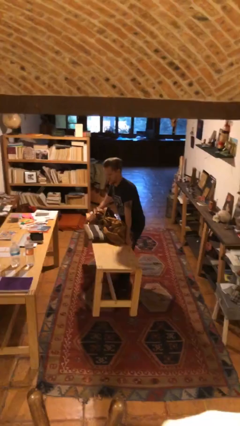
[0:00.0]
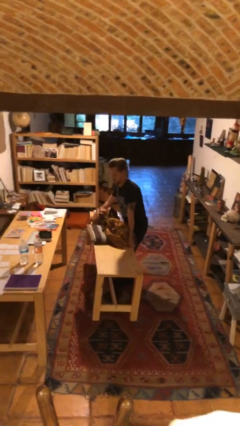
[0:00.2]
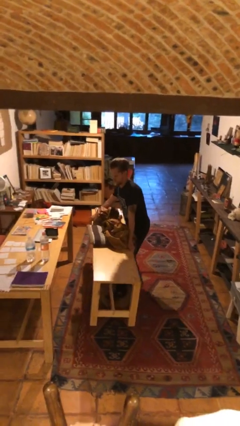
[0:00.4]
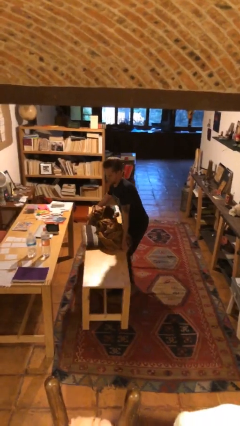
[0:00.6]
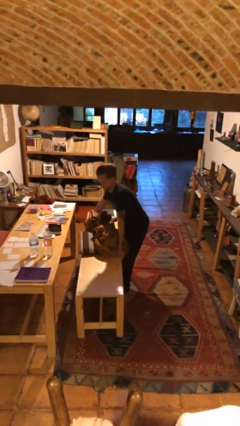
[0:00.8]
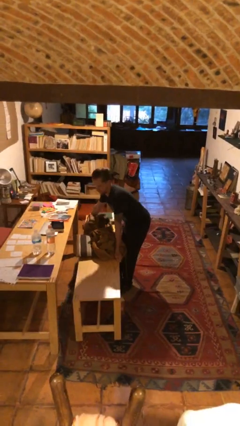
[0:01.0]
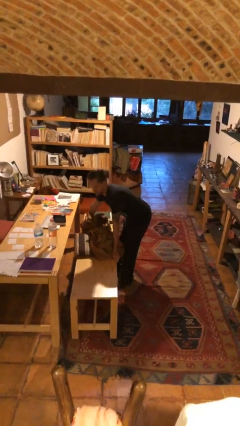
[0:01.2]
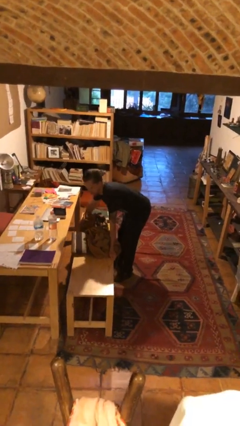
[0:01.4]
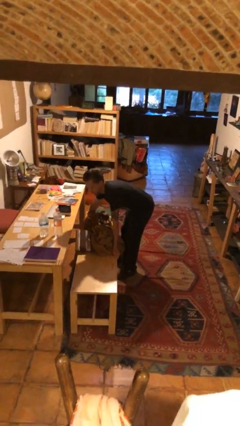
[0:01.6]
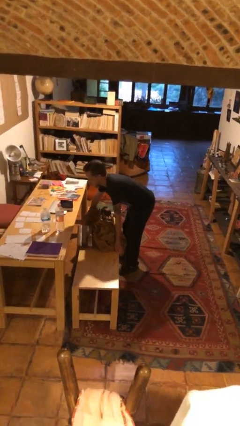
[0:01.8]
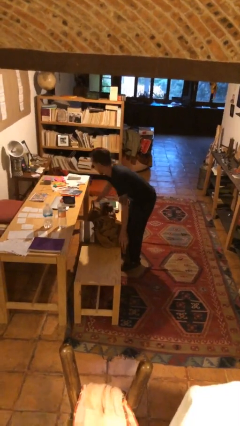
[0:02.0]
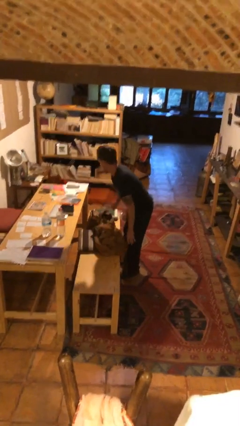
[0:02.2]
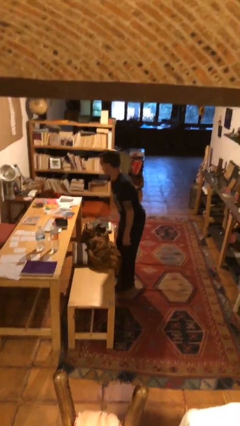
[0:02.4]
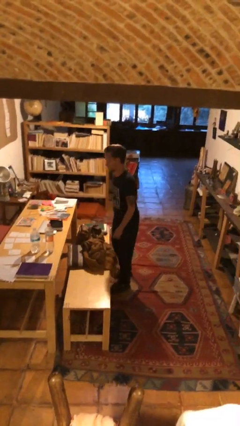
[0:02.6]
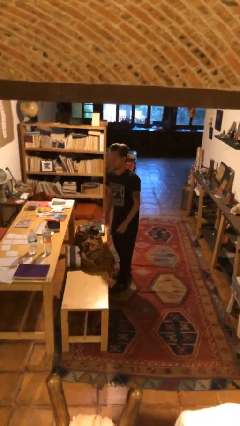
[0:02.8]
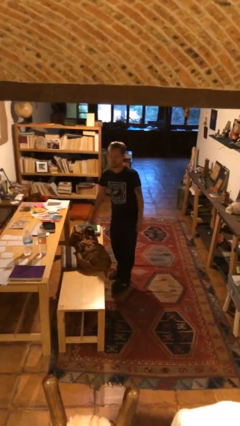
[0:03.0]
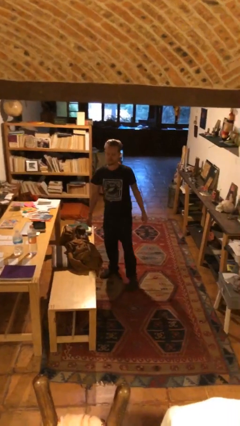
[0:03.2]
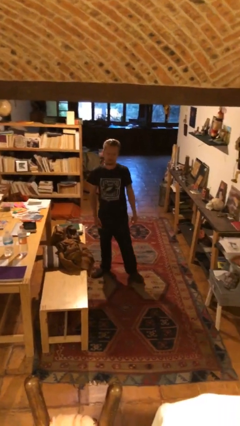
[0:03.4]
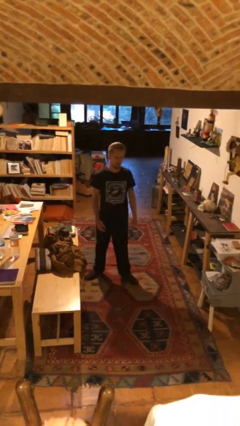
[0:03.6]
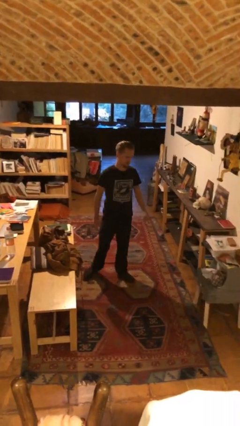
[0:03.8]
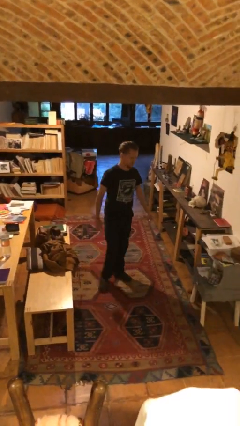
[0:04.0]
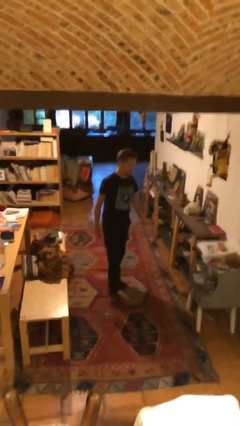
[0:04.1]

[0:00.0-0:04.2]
person puts down object on floor

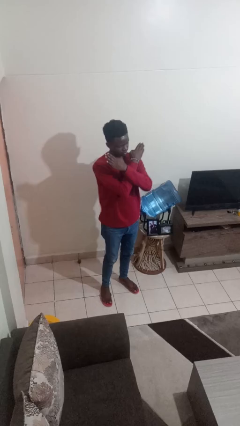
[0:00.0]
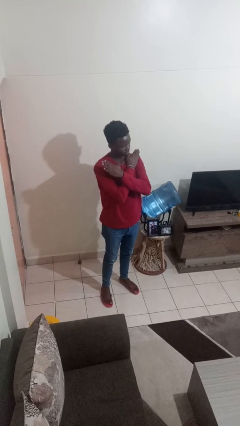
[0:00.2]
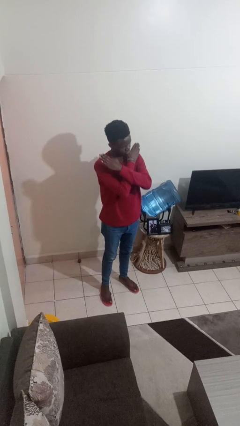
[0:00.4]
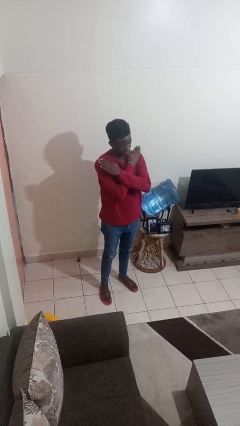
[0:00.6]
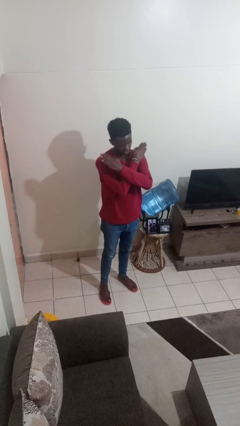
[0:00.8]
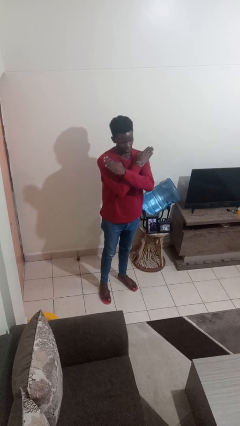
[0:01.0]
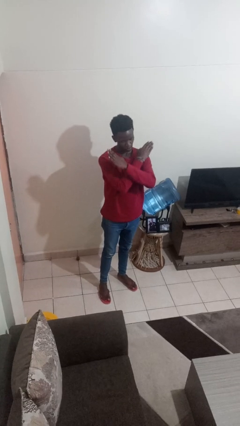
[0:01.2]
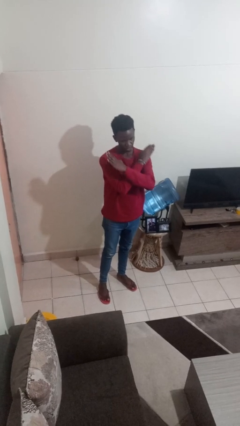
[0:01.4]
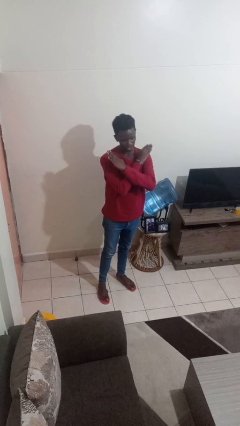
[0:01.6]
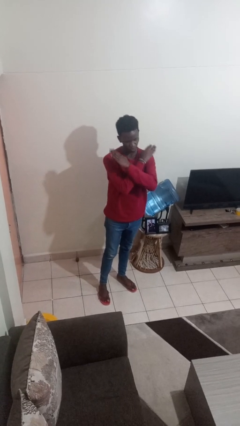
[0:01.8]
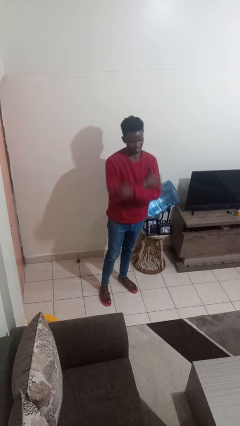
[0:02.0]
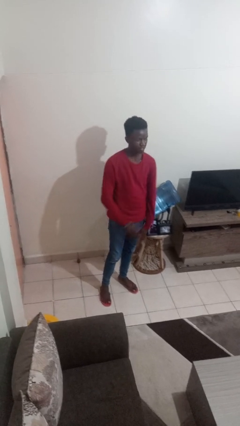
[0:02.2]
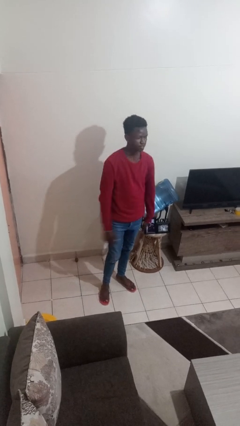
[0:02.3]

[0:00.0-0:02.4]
person gestures arms x

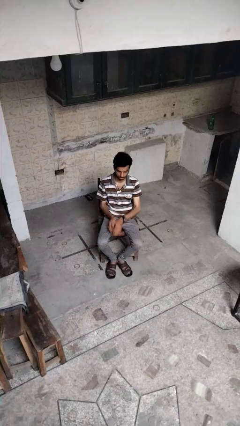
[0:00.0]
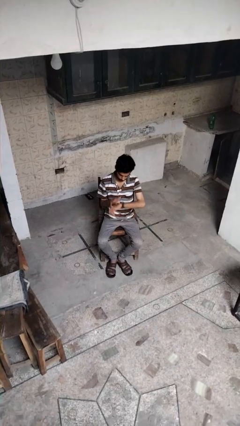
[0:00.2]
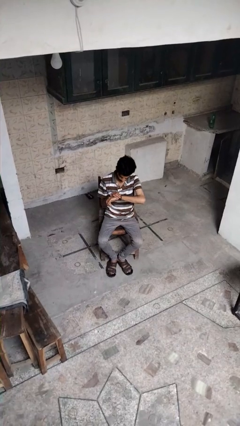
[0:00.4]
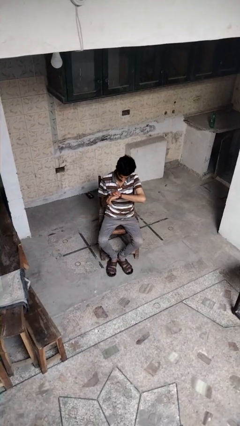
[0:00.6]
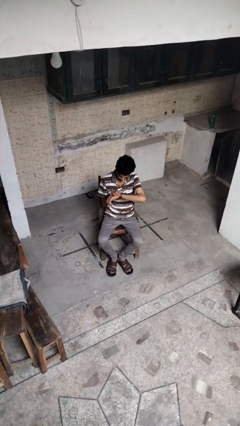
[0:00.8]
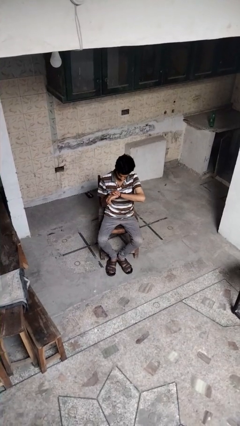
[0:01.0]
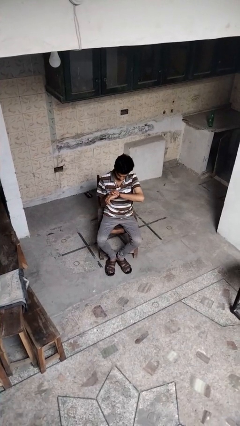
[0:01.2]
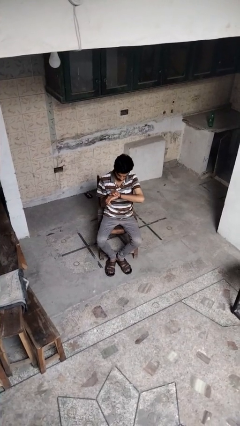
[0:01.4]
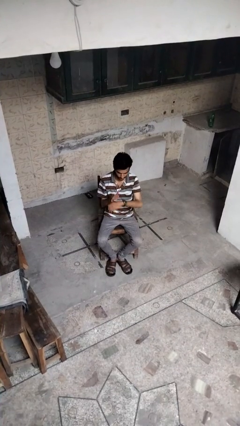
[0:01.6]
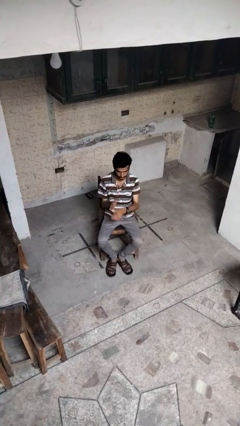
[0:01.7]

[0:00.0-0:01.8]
person looks at wristwatch

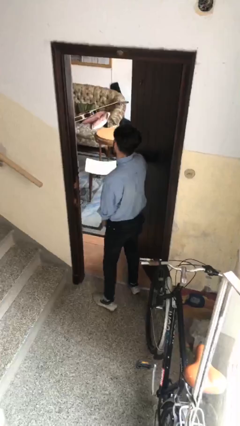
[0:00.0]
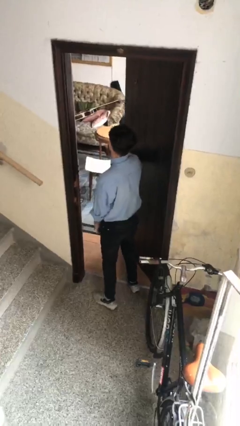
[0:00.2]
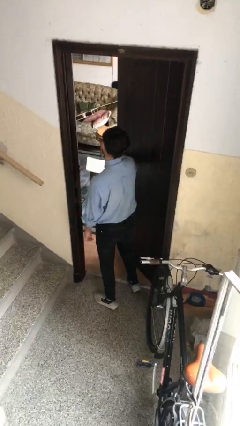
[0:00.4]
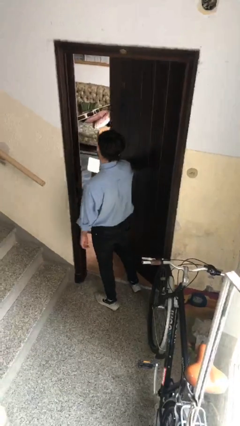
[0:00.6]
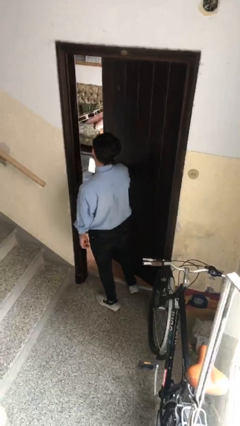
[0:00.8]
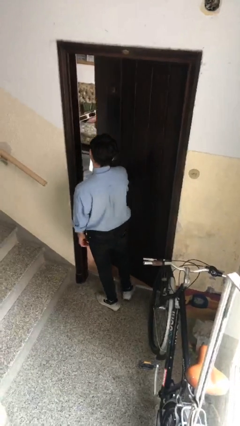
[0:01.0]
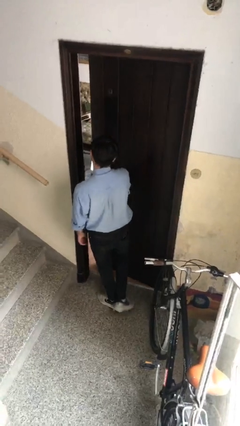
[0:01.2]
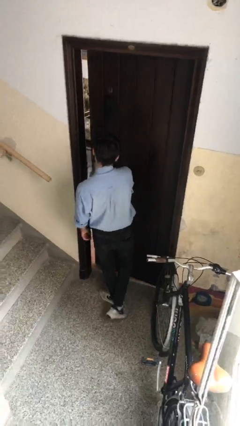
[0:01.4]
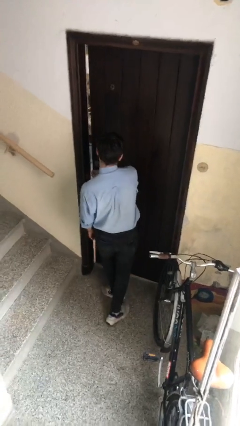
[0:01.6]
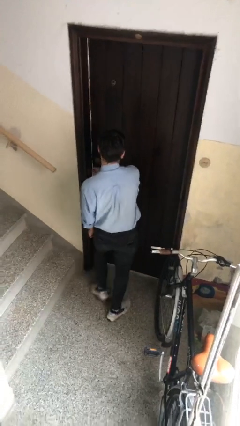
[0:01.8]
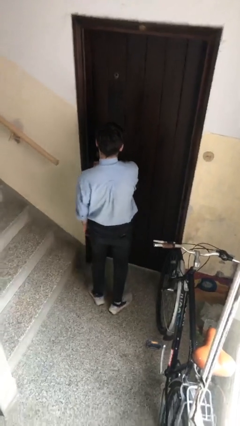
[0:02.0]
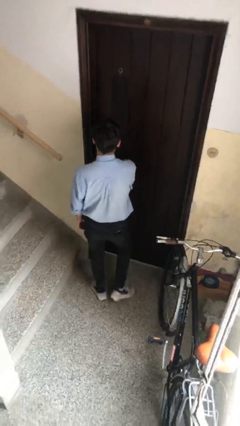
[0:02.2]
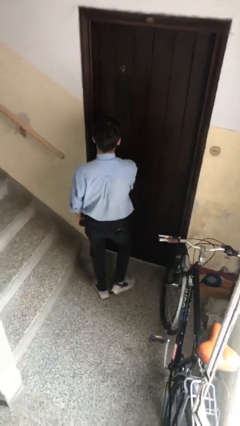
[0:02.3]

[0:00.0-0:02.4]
person closes facility door

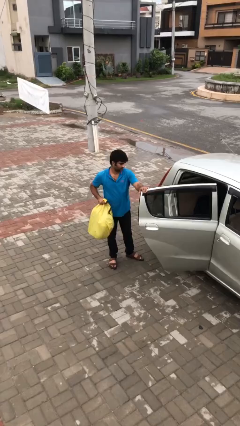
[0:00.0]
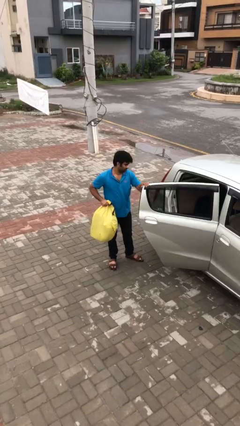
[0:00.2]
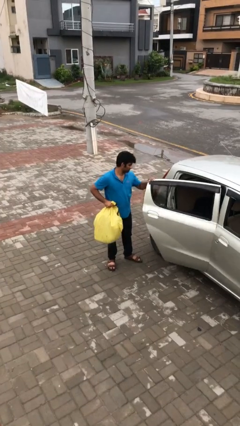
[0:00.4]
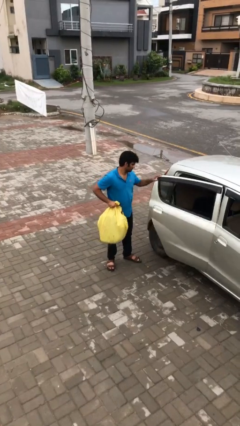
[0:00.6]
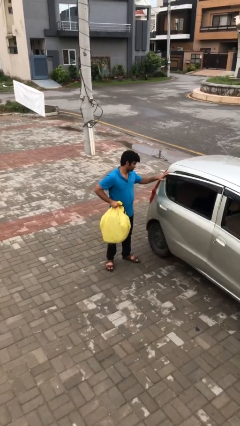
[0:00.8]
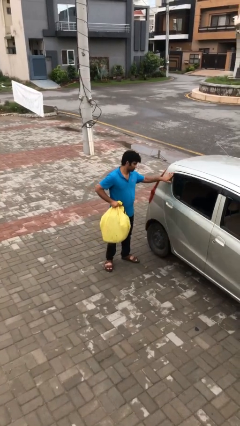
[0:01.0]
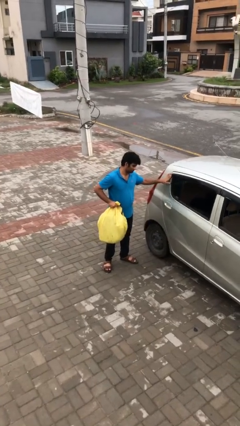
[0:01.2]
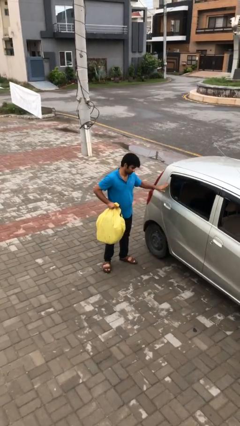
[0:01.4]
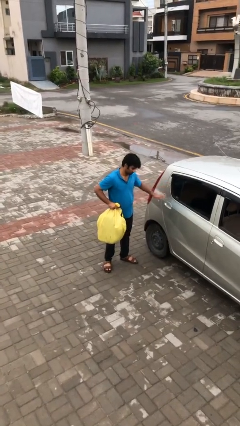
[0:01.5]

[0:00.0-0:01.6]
person closes car door

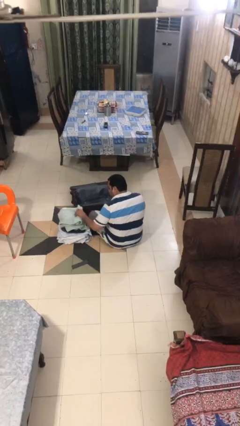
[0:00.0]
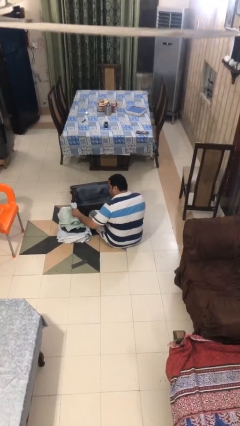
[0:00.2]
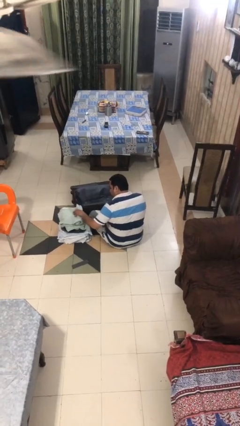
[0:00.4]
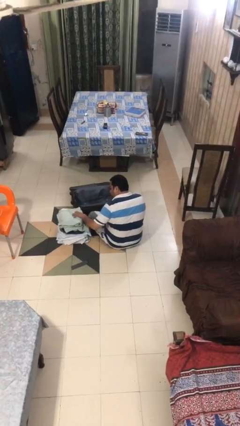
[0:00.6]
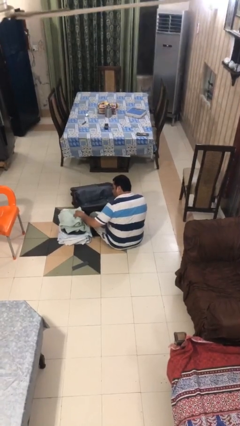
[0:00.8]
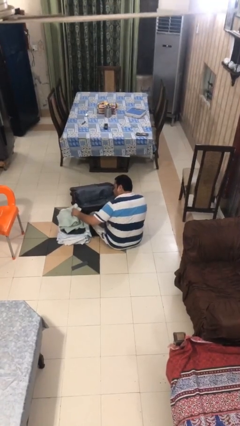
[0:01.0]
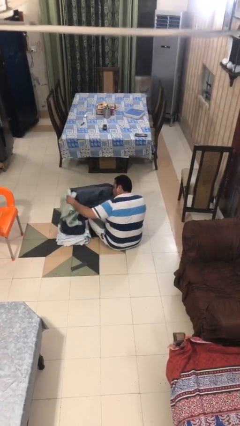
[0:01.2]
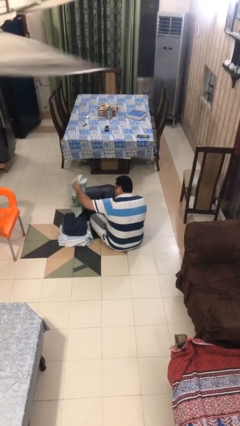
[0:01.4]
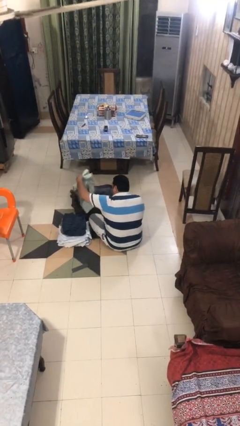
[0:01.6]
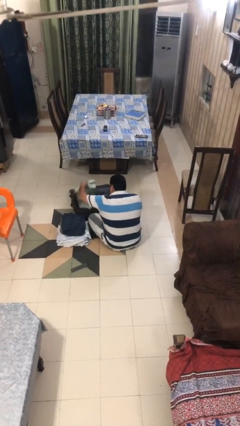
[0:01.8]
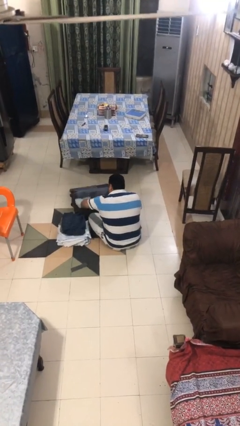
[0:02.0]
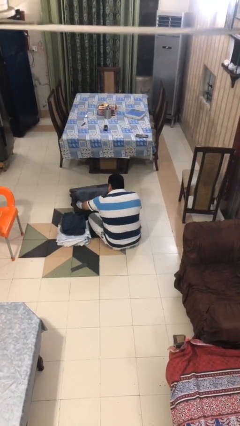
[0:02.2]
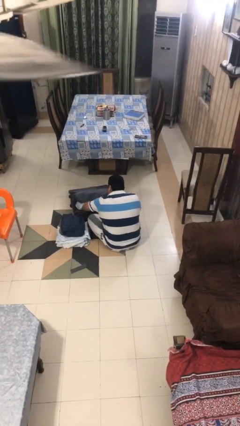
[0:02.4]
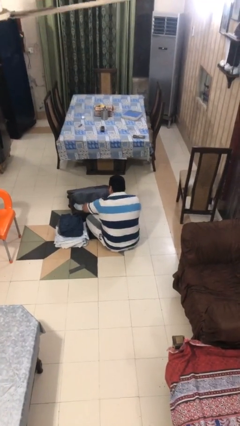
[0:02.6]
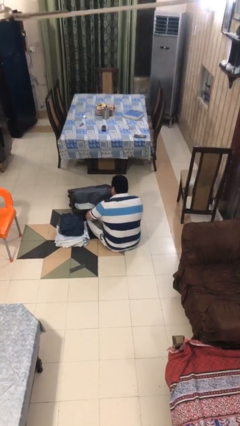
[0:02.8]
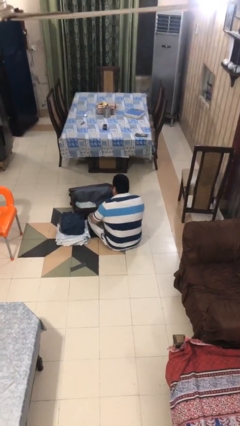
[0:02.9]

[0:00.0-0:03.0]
person loads clothes into suitcase

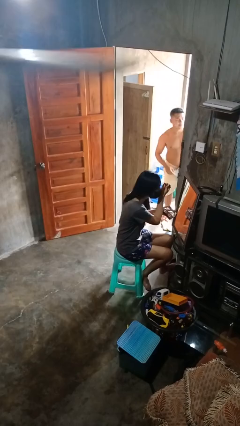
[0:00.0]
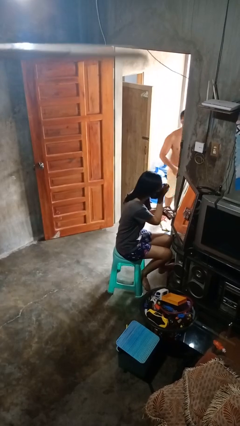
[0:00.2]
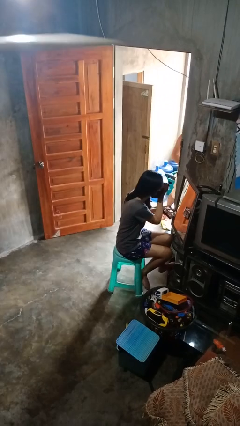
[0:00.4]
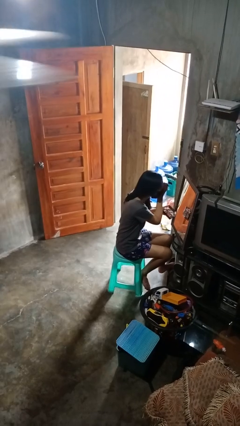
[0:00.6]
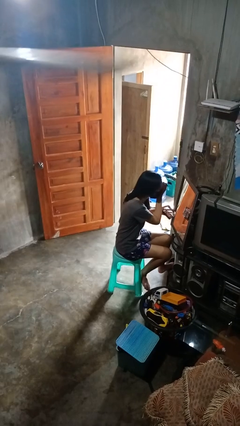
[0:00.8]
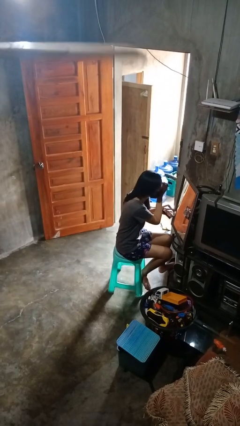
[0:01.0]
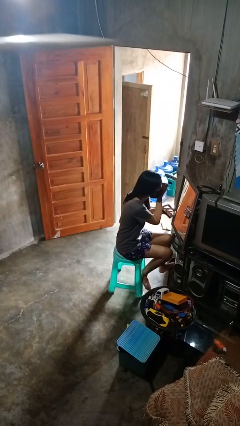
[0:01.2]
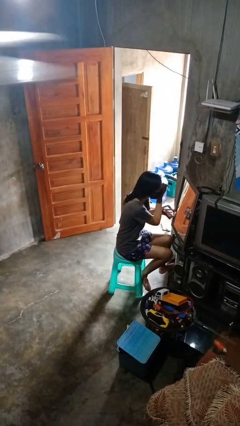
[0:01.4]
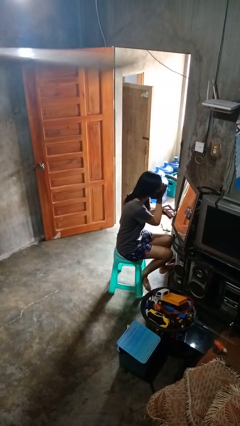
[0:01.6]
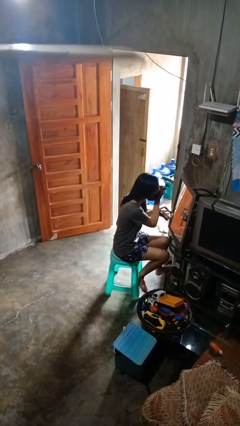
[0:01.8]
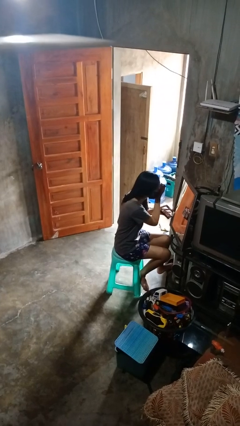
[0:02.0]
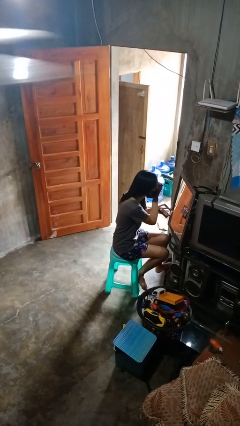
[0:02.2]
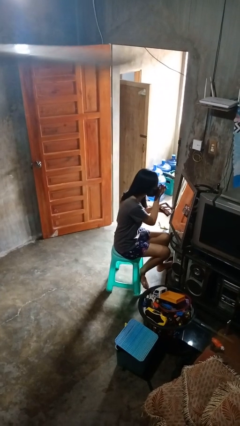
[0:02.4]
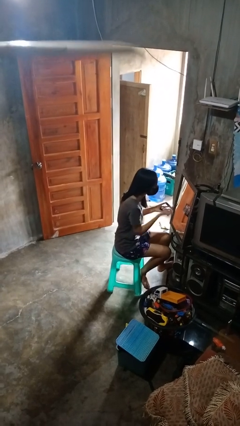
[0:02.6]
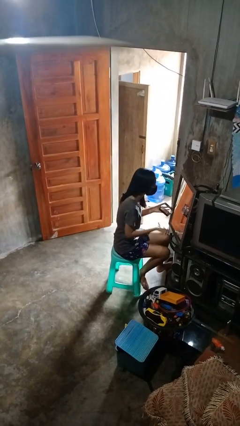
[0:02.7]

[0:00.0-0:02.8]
person applies eye makeup
